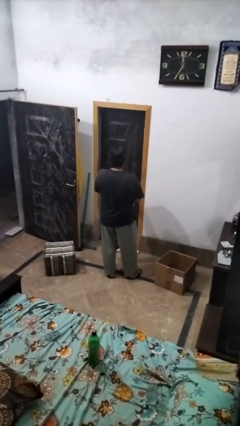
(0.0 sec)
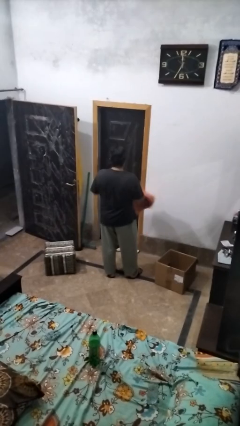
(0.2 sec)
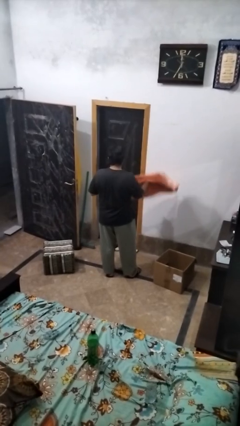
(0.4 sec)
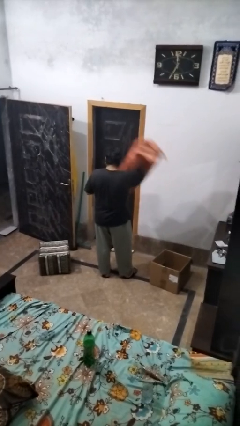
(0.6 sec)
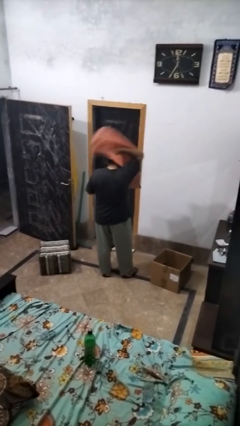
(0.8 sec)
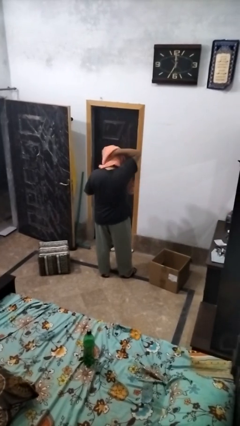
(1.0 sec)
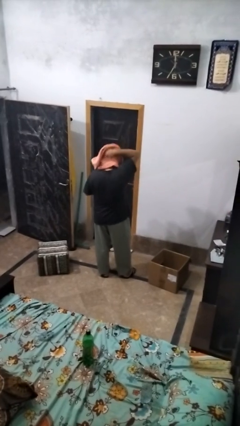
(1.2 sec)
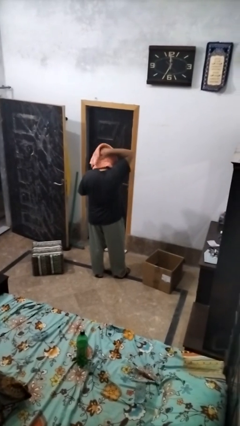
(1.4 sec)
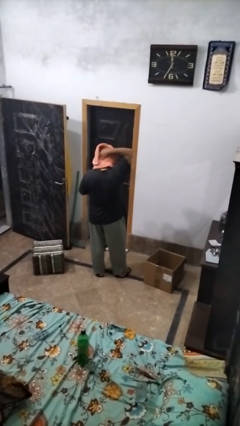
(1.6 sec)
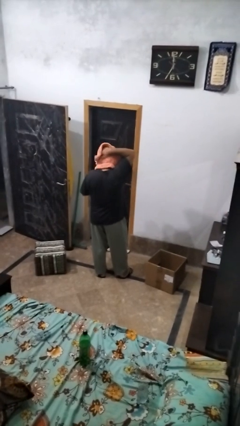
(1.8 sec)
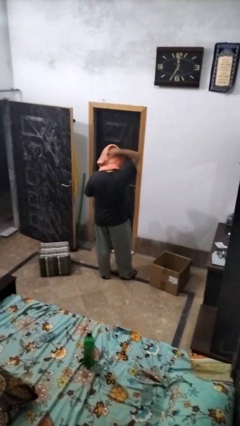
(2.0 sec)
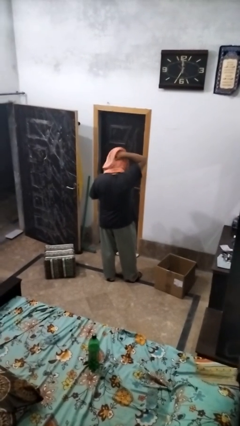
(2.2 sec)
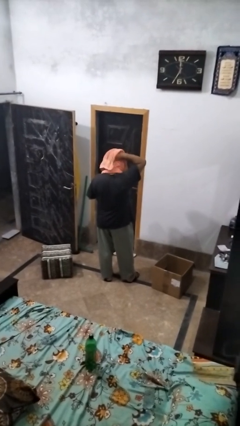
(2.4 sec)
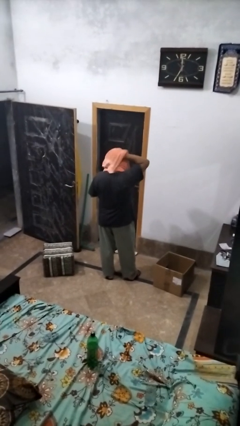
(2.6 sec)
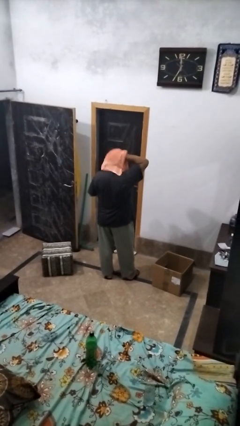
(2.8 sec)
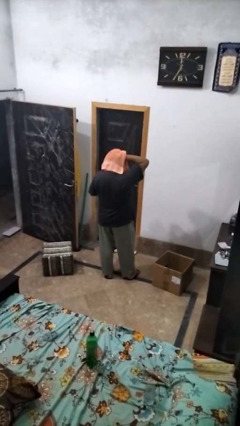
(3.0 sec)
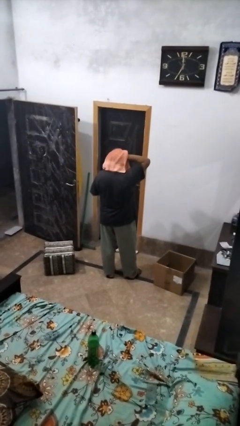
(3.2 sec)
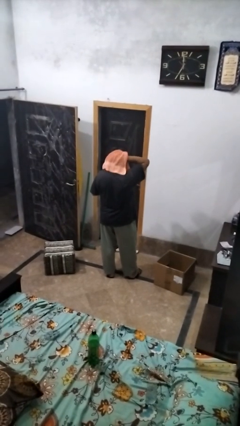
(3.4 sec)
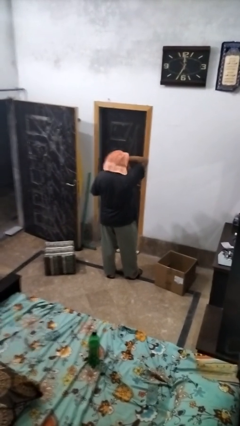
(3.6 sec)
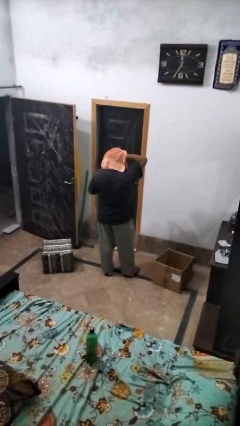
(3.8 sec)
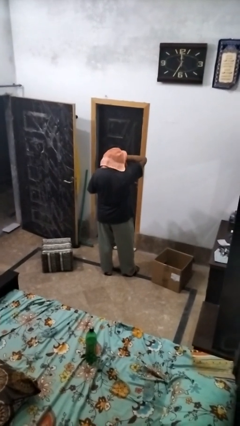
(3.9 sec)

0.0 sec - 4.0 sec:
person dries hair with towel

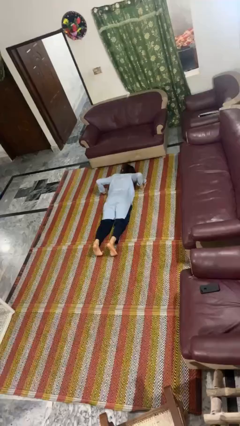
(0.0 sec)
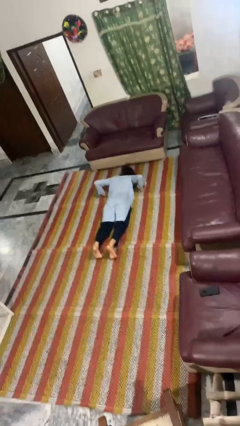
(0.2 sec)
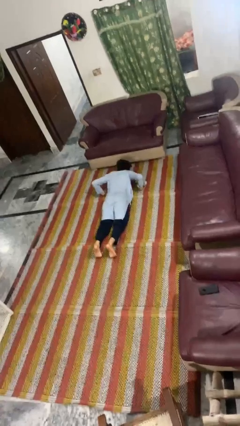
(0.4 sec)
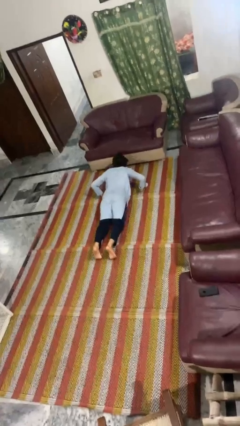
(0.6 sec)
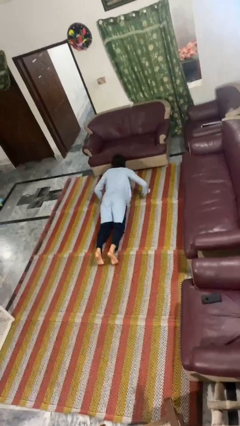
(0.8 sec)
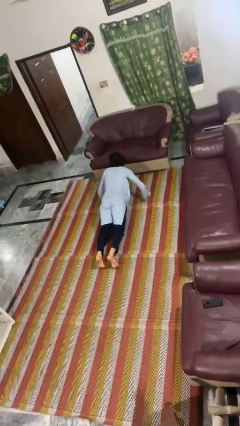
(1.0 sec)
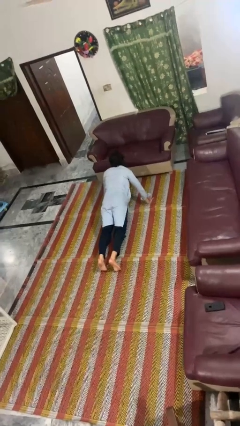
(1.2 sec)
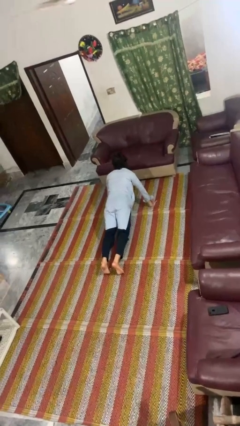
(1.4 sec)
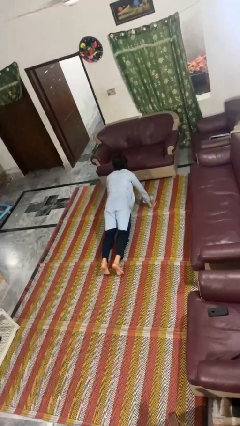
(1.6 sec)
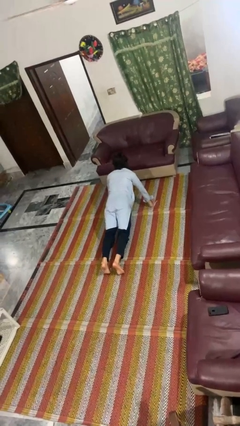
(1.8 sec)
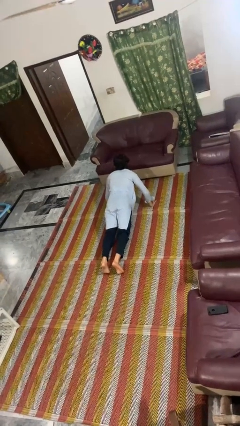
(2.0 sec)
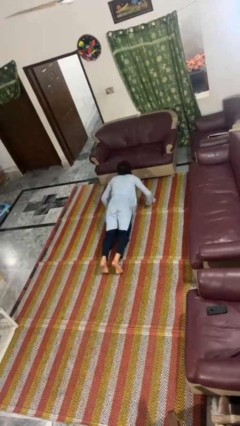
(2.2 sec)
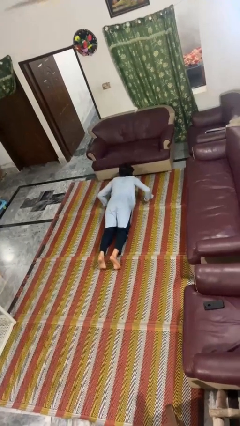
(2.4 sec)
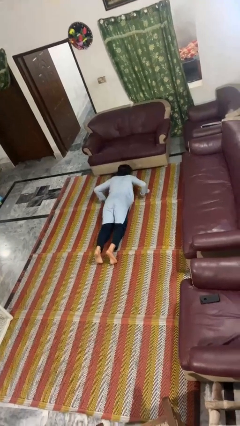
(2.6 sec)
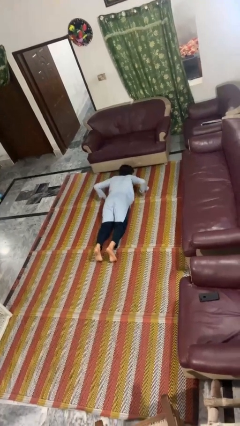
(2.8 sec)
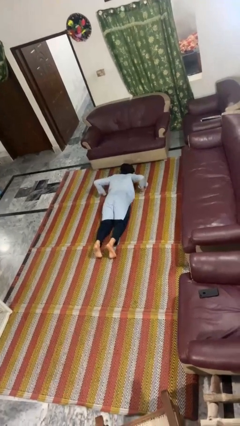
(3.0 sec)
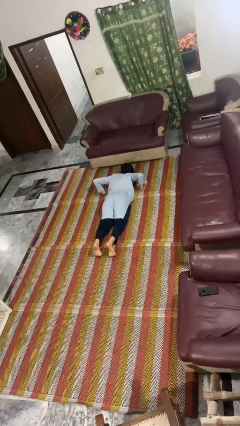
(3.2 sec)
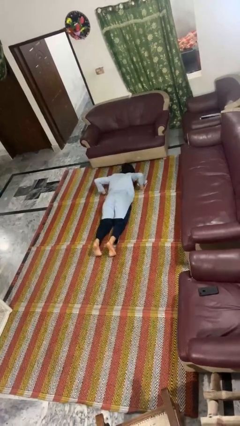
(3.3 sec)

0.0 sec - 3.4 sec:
person exercises with pushup

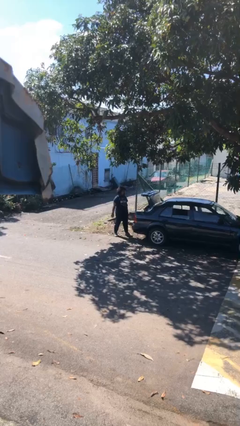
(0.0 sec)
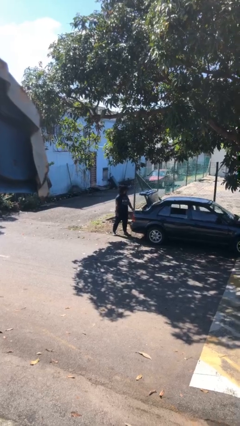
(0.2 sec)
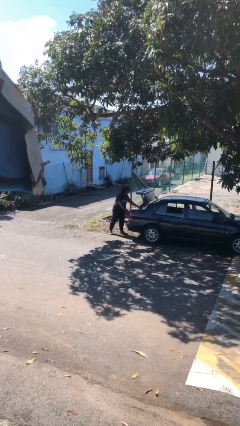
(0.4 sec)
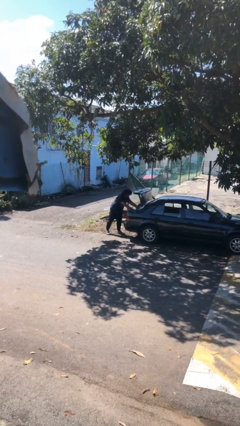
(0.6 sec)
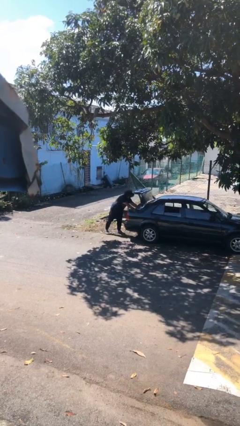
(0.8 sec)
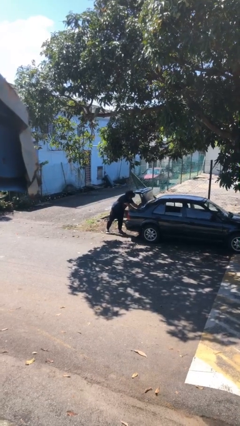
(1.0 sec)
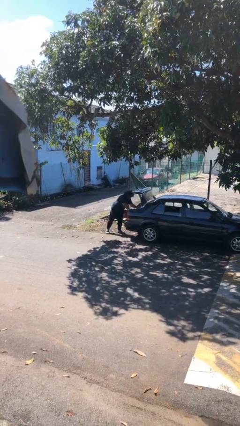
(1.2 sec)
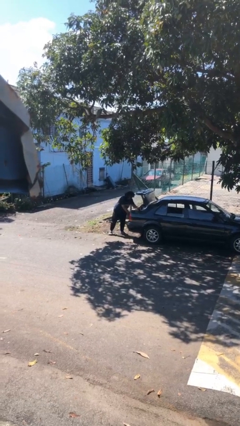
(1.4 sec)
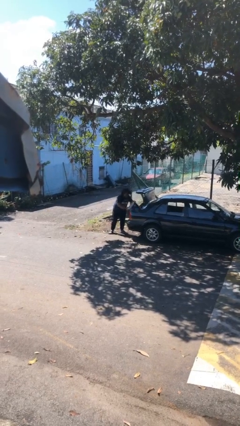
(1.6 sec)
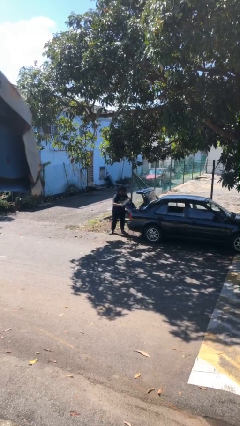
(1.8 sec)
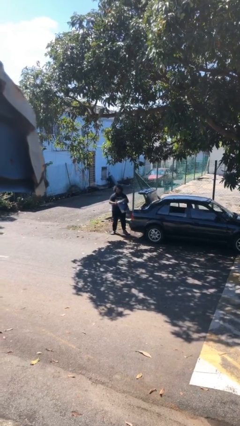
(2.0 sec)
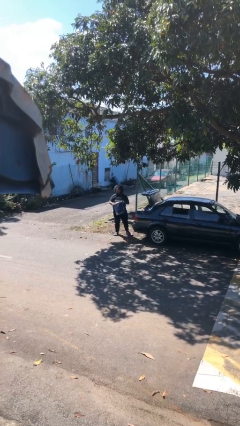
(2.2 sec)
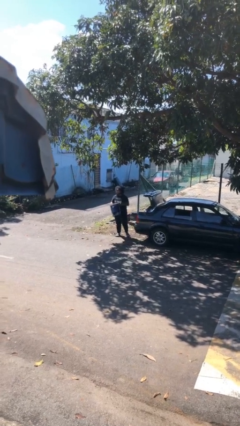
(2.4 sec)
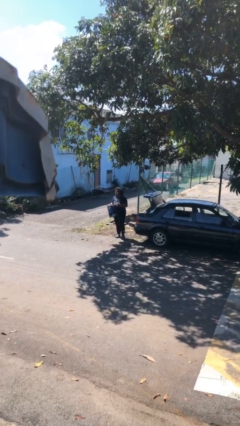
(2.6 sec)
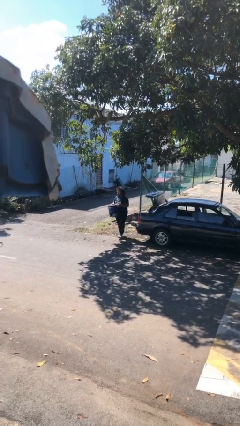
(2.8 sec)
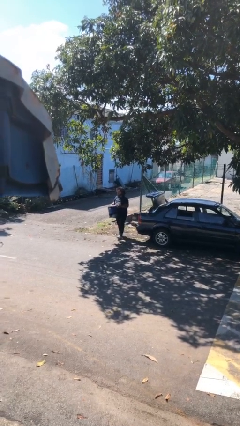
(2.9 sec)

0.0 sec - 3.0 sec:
person unloads car

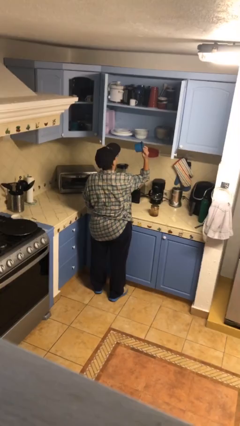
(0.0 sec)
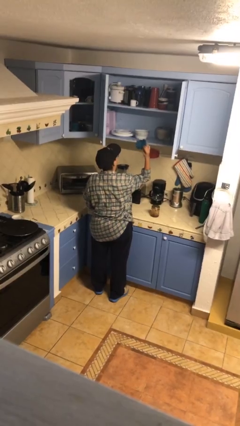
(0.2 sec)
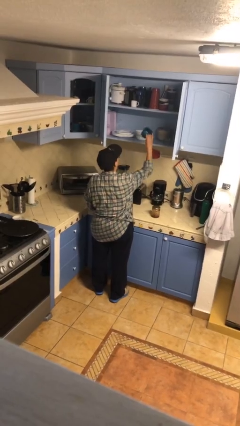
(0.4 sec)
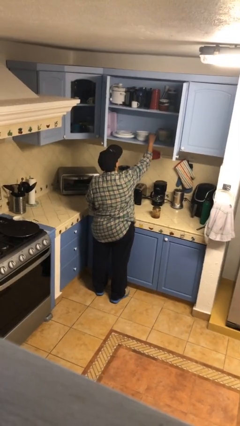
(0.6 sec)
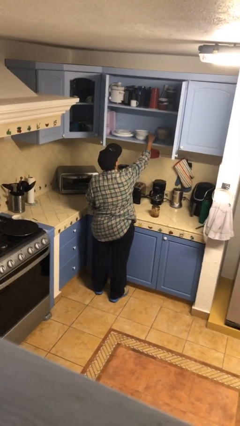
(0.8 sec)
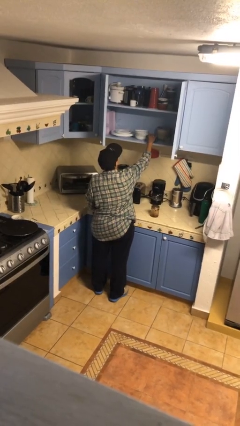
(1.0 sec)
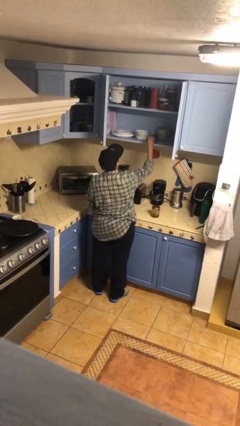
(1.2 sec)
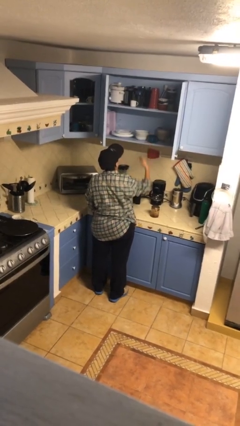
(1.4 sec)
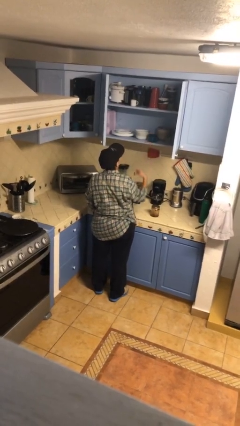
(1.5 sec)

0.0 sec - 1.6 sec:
person puts down object into cabinet

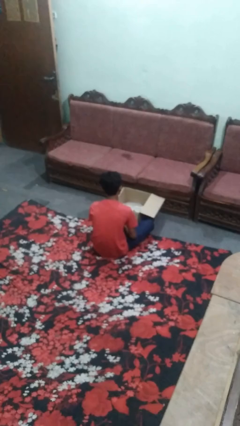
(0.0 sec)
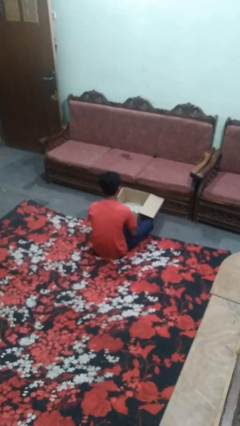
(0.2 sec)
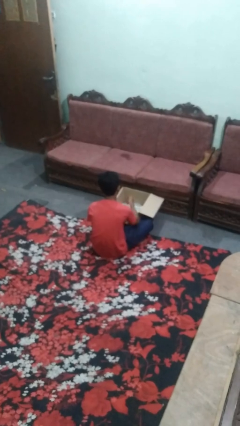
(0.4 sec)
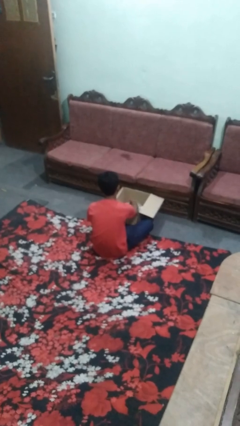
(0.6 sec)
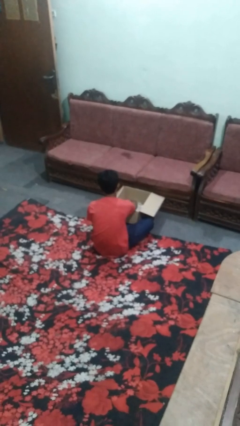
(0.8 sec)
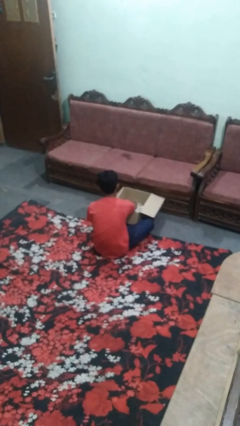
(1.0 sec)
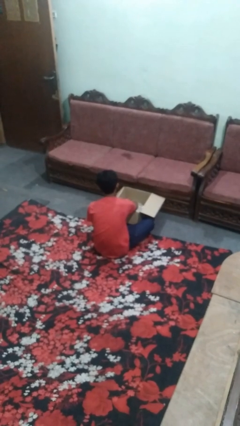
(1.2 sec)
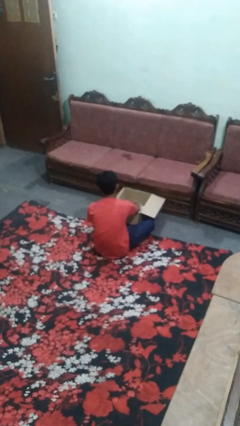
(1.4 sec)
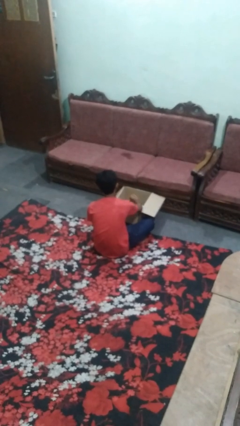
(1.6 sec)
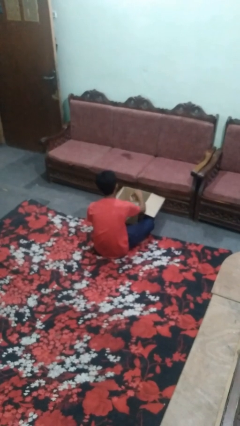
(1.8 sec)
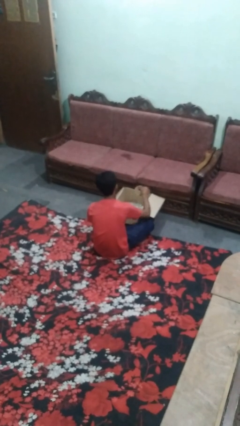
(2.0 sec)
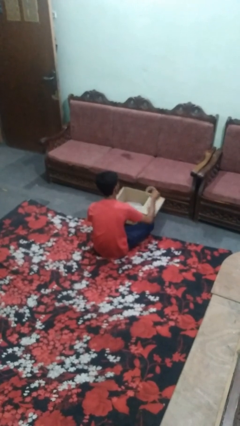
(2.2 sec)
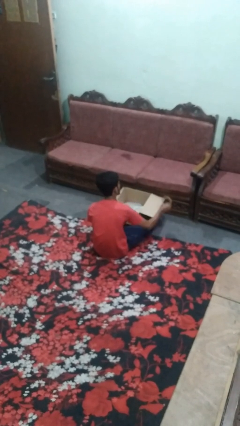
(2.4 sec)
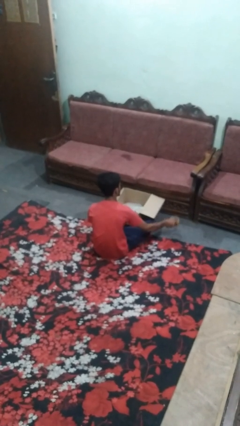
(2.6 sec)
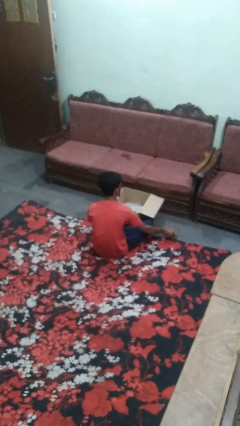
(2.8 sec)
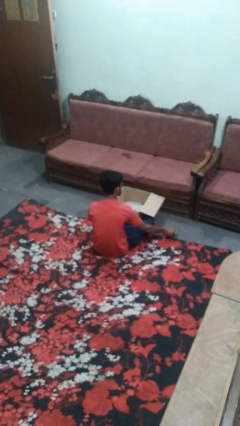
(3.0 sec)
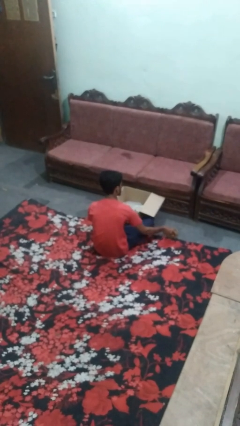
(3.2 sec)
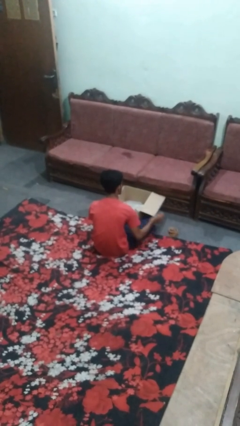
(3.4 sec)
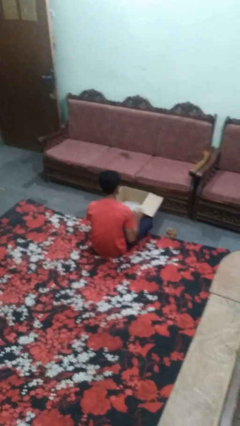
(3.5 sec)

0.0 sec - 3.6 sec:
person takes object from box

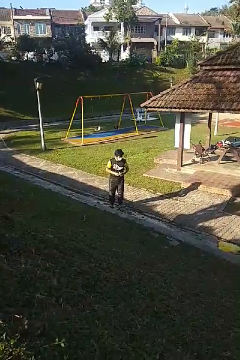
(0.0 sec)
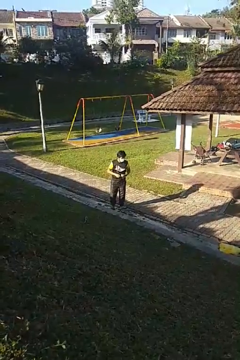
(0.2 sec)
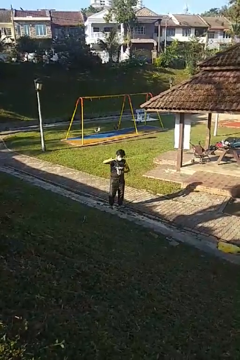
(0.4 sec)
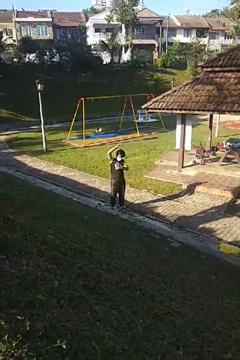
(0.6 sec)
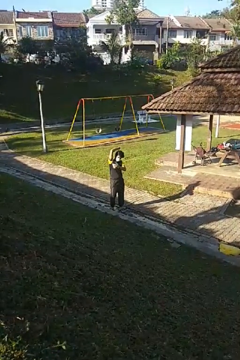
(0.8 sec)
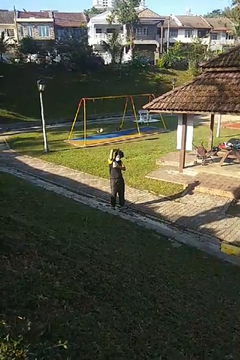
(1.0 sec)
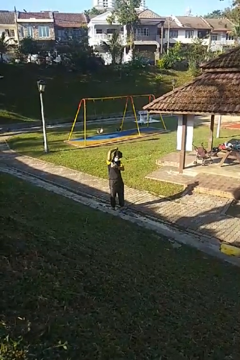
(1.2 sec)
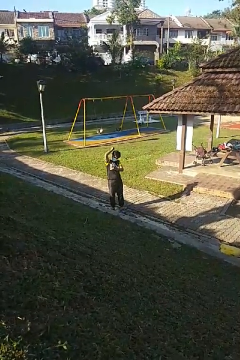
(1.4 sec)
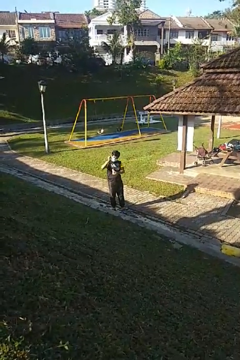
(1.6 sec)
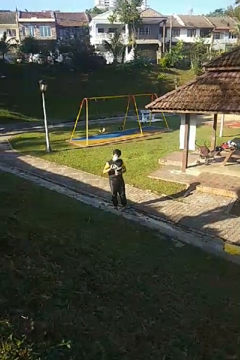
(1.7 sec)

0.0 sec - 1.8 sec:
person applies deodorant
